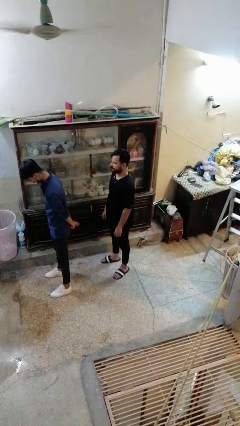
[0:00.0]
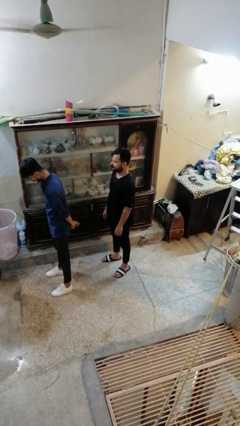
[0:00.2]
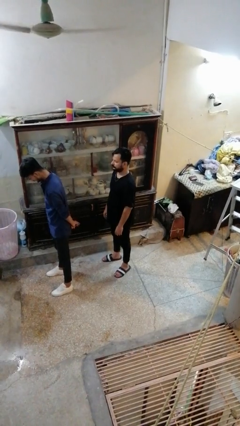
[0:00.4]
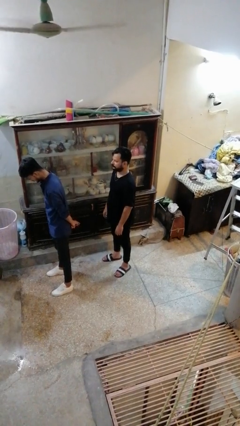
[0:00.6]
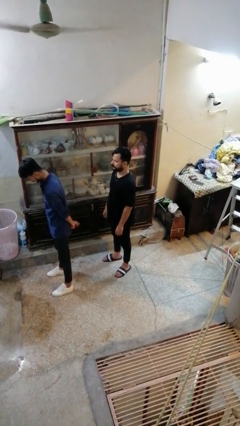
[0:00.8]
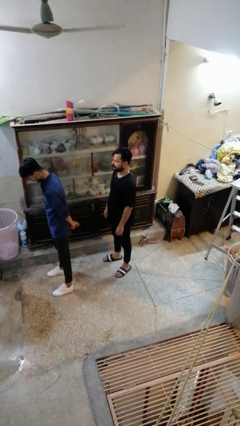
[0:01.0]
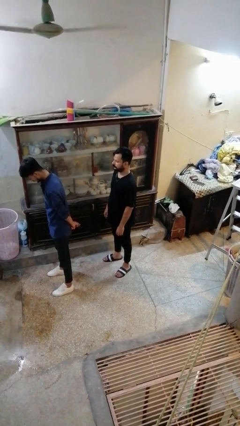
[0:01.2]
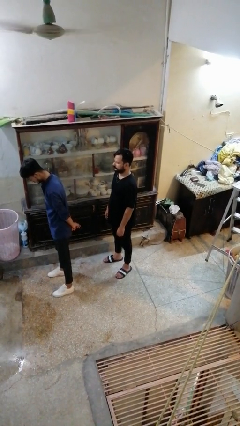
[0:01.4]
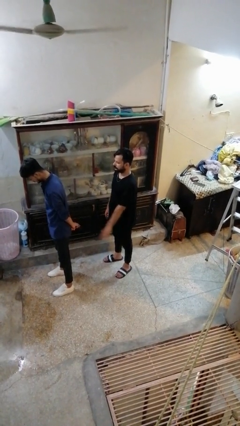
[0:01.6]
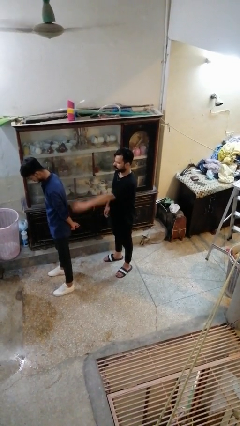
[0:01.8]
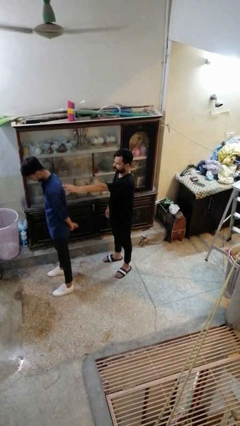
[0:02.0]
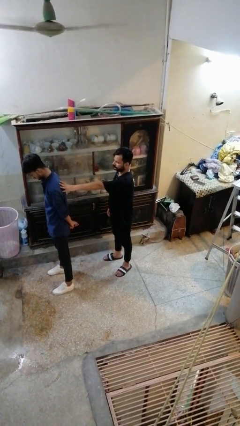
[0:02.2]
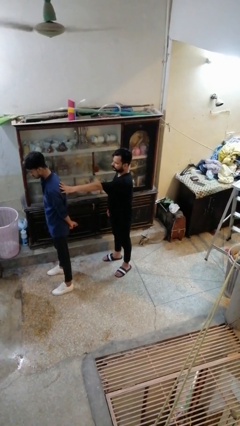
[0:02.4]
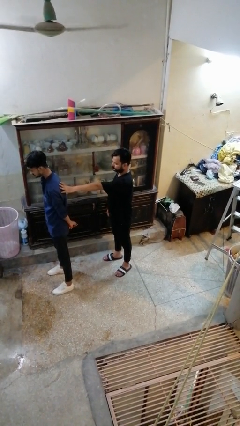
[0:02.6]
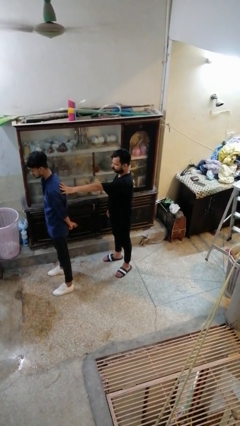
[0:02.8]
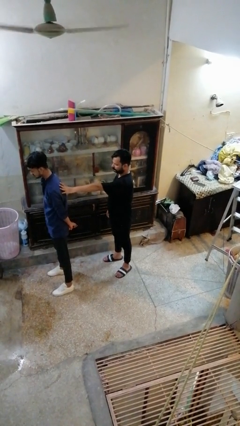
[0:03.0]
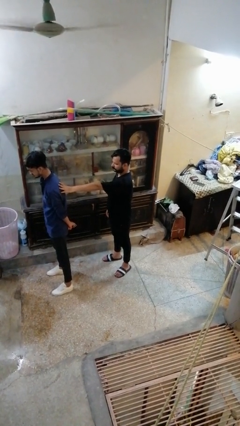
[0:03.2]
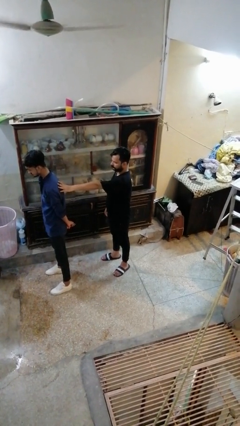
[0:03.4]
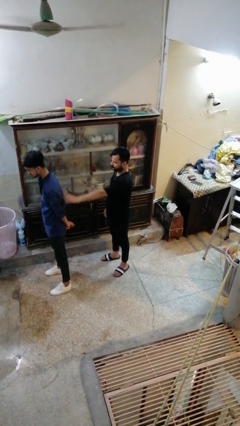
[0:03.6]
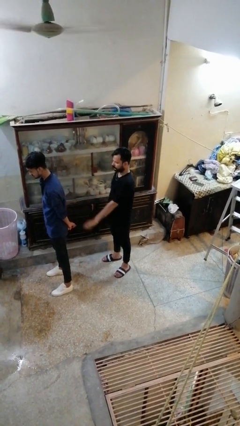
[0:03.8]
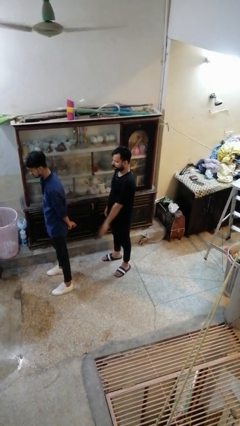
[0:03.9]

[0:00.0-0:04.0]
person touches back of person

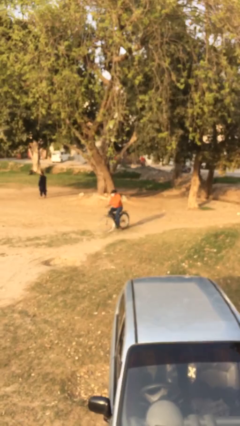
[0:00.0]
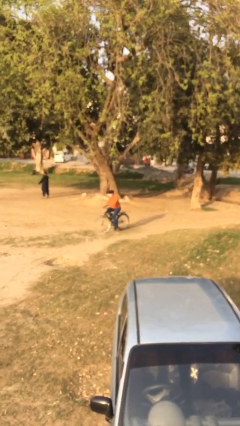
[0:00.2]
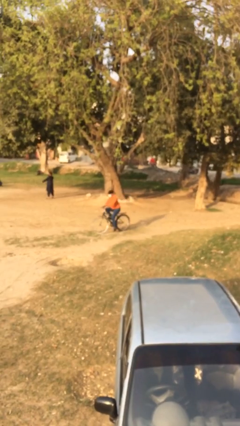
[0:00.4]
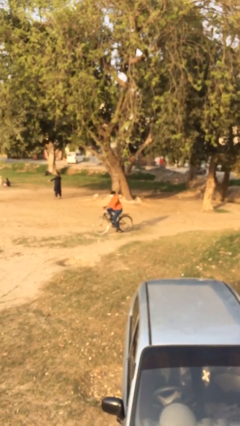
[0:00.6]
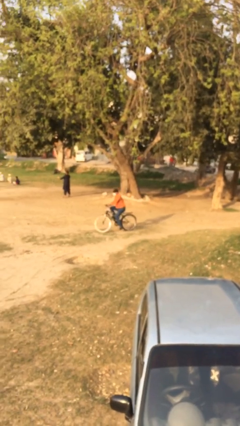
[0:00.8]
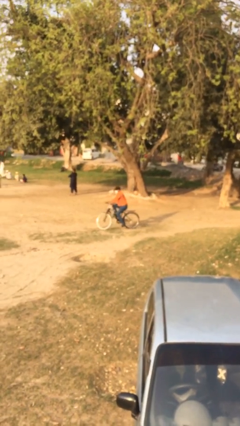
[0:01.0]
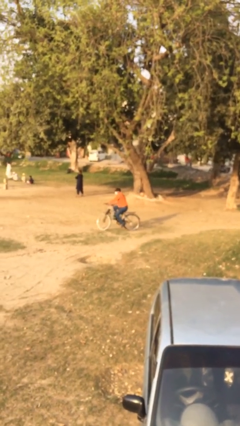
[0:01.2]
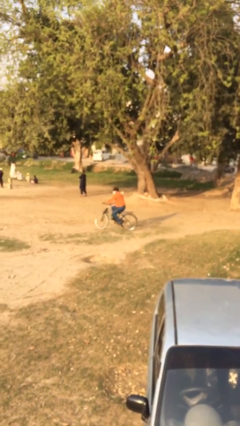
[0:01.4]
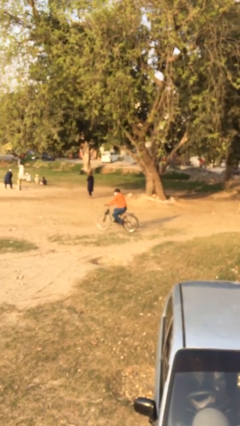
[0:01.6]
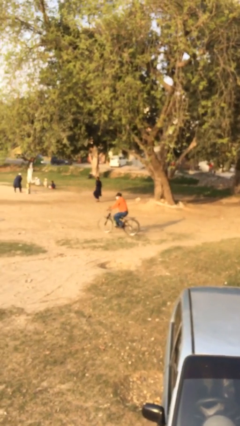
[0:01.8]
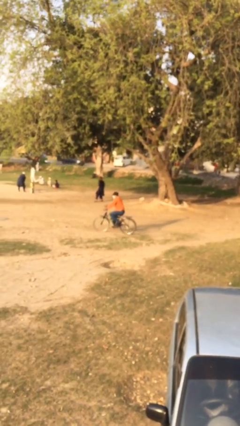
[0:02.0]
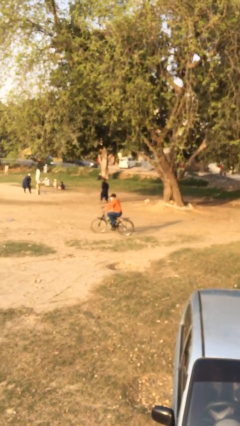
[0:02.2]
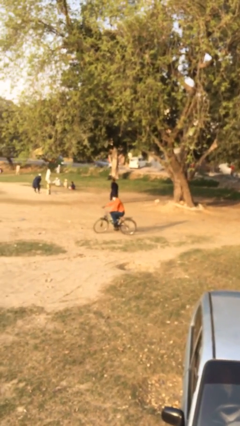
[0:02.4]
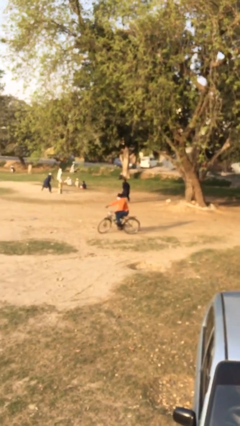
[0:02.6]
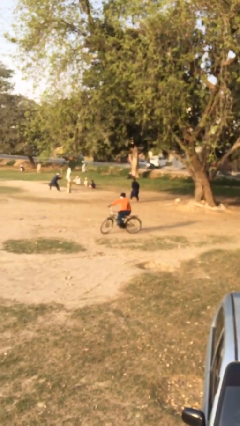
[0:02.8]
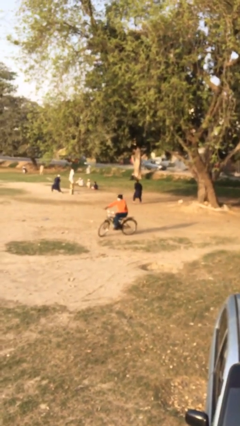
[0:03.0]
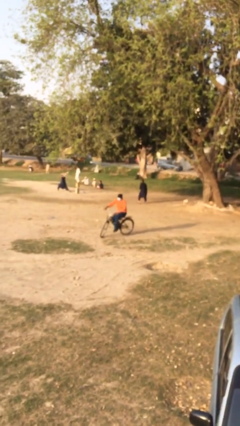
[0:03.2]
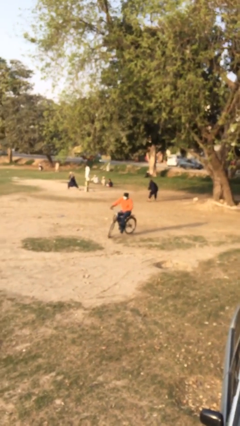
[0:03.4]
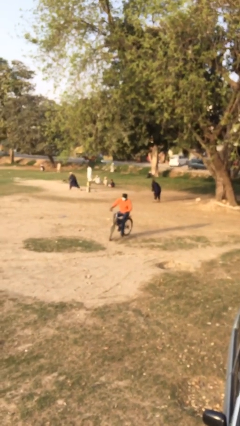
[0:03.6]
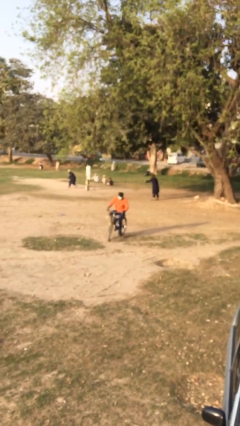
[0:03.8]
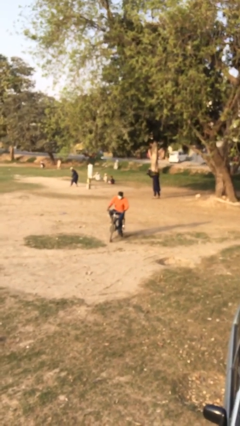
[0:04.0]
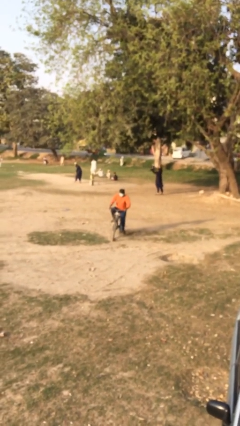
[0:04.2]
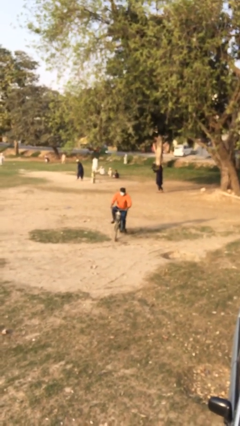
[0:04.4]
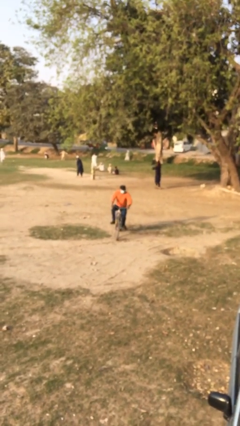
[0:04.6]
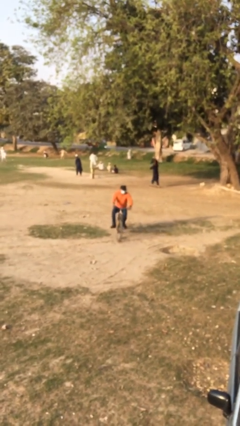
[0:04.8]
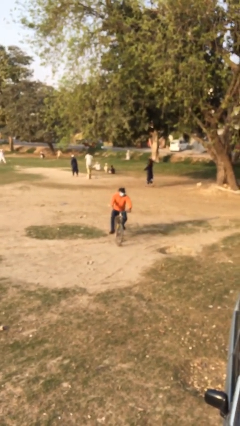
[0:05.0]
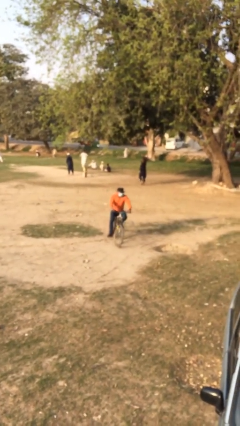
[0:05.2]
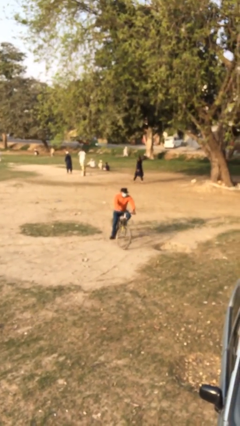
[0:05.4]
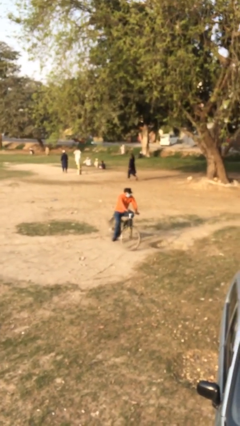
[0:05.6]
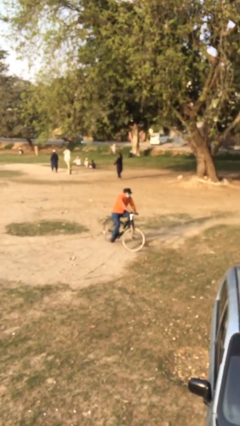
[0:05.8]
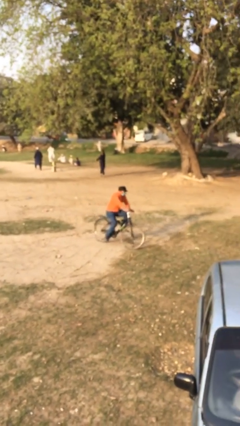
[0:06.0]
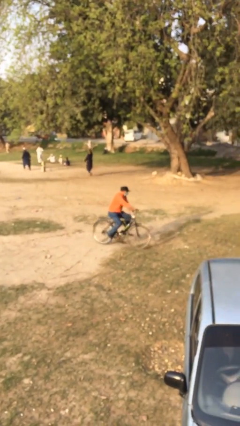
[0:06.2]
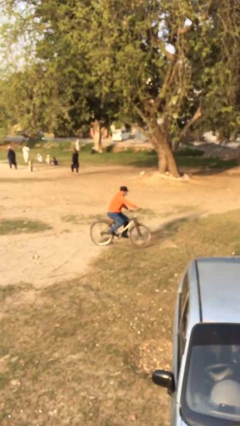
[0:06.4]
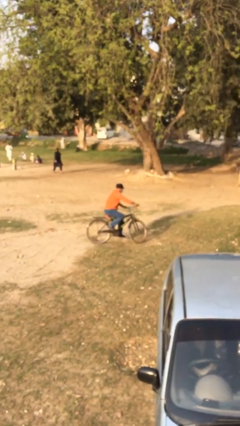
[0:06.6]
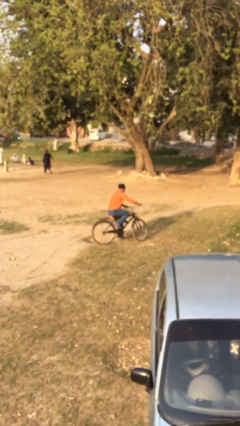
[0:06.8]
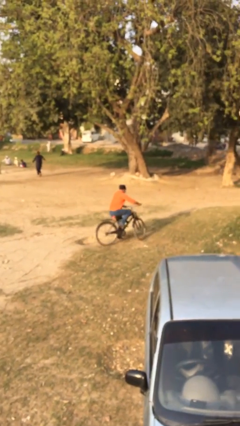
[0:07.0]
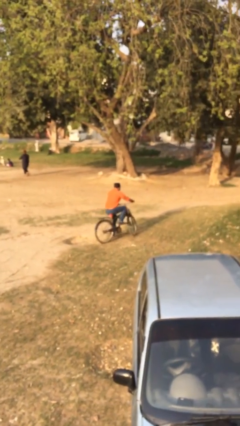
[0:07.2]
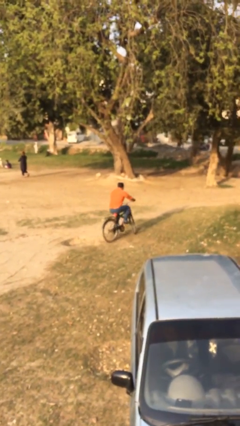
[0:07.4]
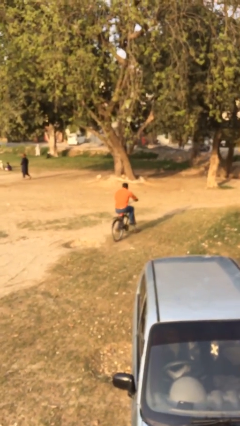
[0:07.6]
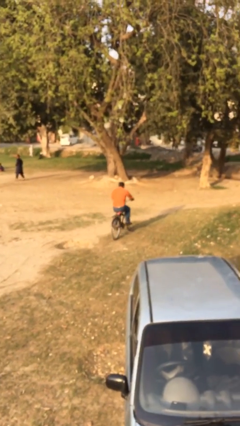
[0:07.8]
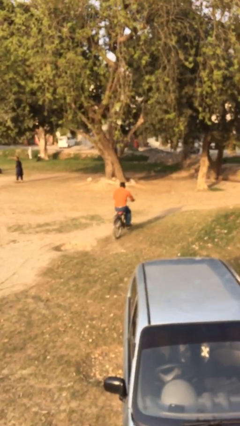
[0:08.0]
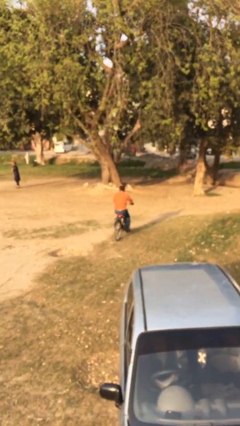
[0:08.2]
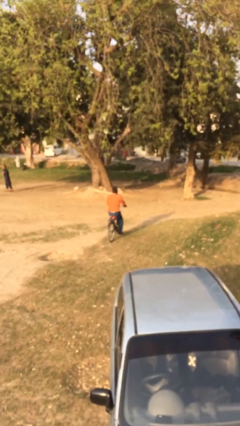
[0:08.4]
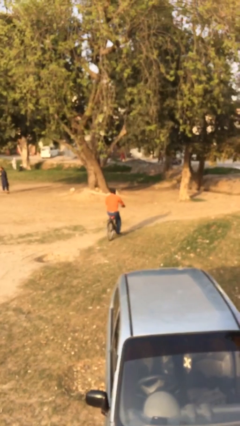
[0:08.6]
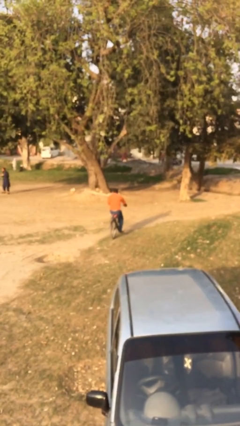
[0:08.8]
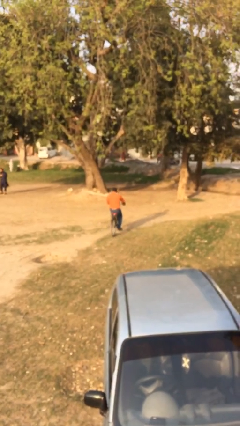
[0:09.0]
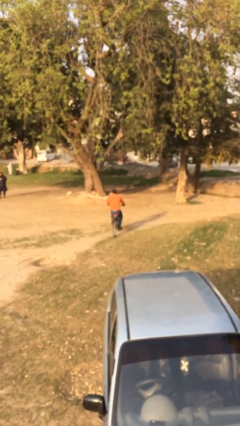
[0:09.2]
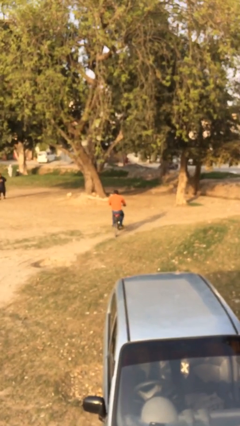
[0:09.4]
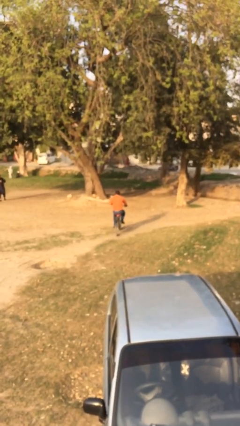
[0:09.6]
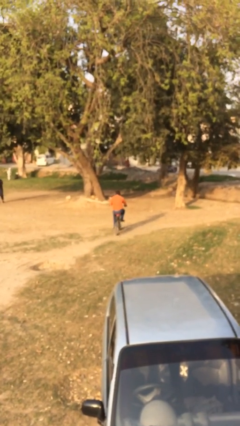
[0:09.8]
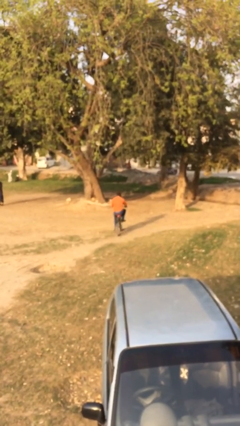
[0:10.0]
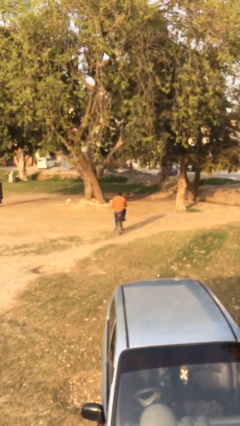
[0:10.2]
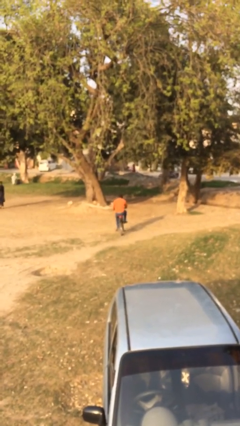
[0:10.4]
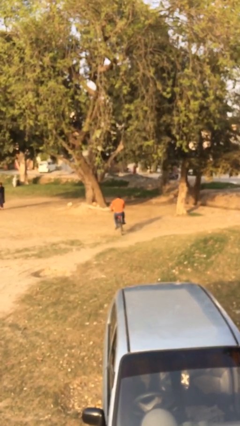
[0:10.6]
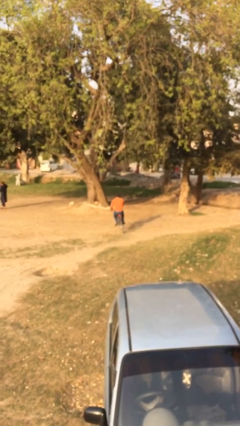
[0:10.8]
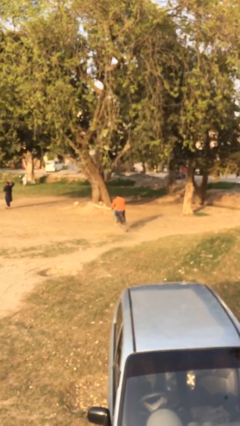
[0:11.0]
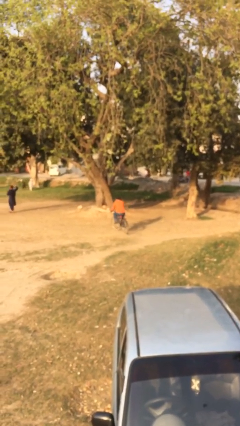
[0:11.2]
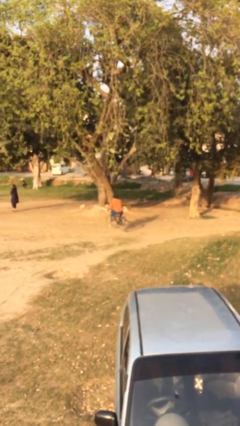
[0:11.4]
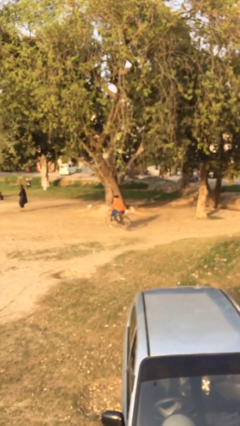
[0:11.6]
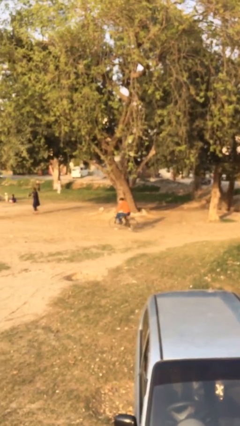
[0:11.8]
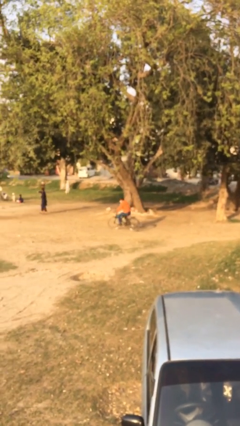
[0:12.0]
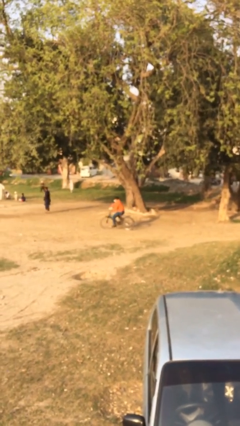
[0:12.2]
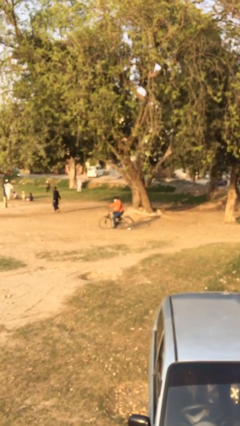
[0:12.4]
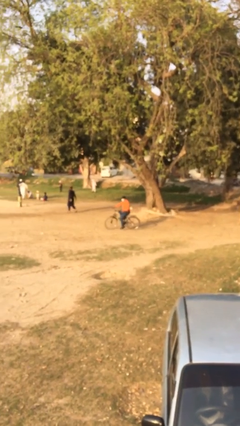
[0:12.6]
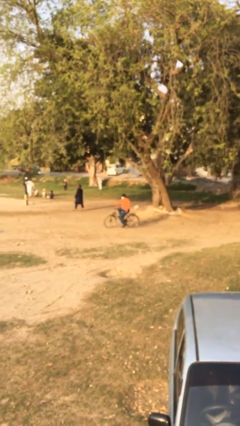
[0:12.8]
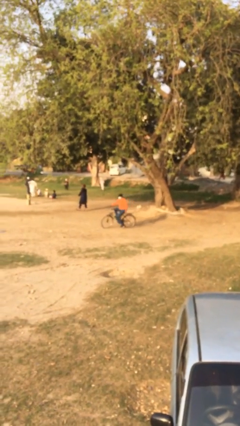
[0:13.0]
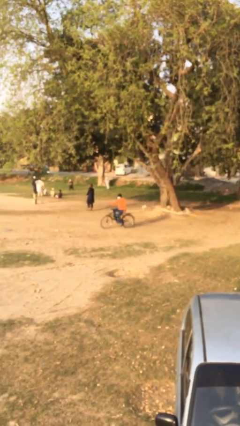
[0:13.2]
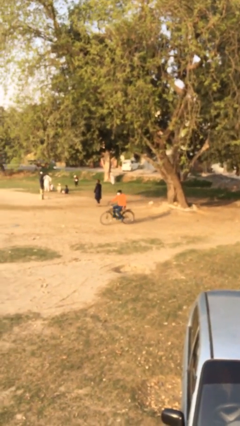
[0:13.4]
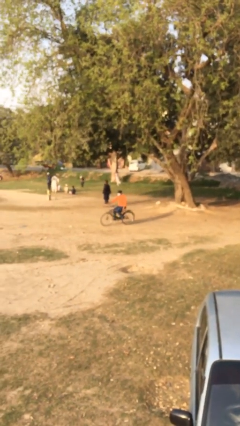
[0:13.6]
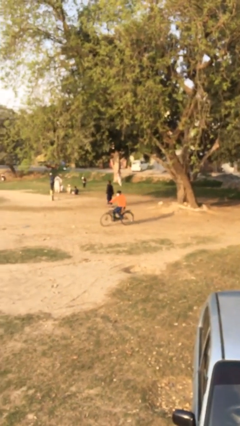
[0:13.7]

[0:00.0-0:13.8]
person rides bicycle

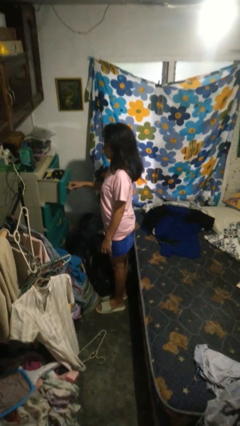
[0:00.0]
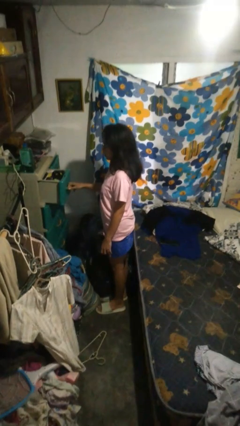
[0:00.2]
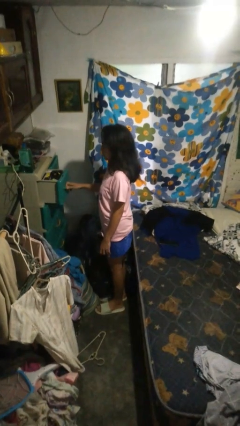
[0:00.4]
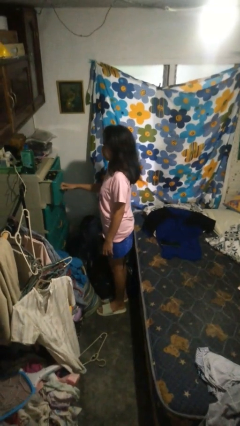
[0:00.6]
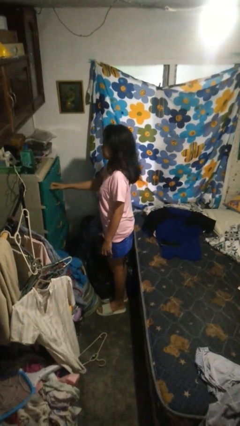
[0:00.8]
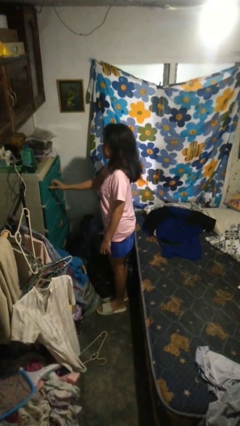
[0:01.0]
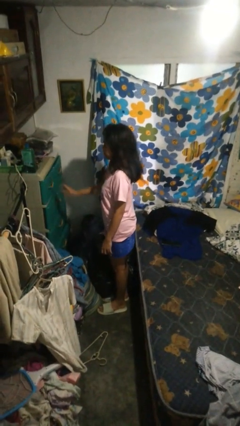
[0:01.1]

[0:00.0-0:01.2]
person closes dresser drawer
